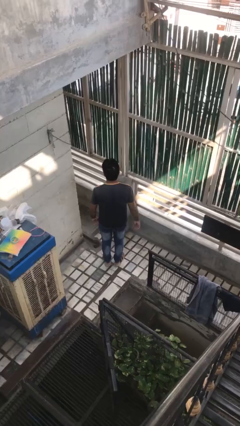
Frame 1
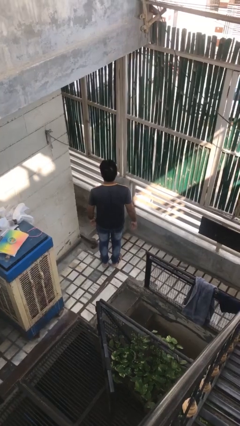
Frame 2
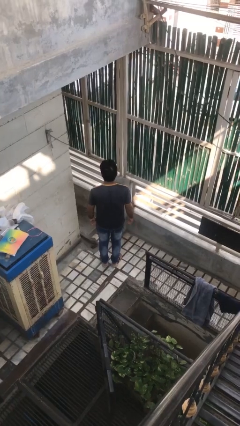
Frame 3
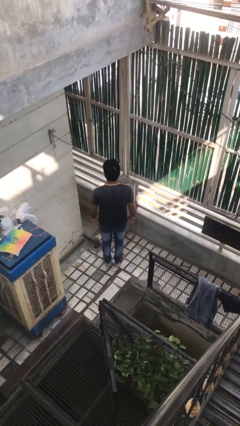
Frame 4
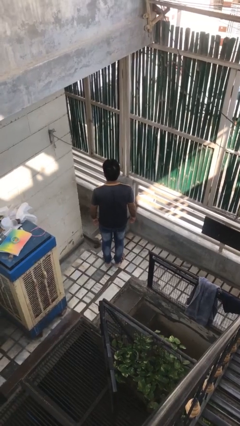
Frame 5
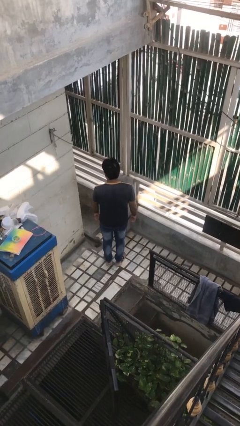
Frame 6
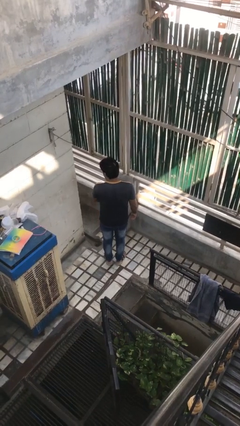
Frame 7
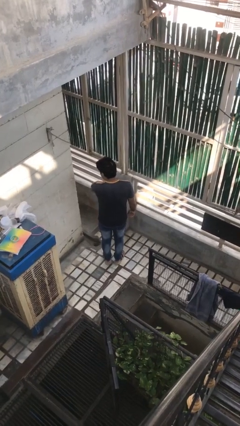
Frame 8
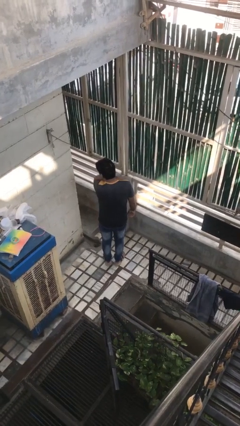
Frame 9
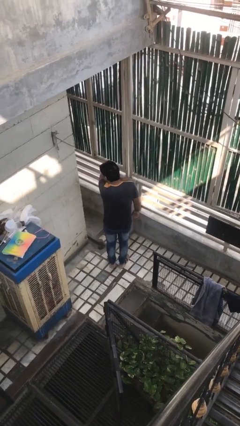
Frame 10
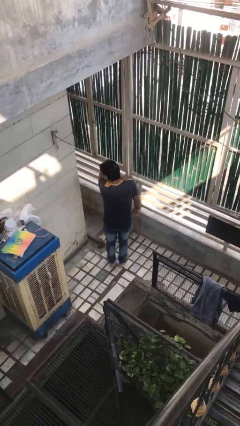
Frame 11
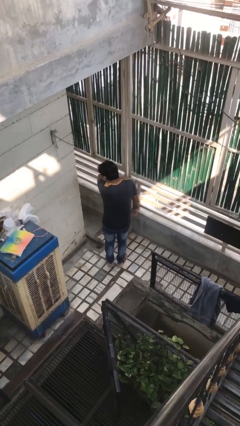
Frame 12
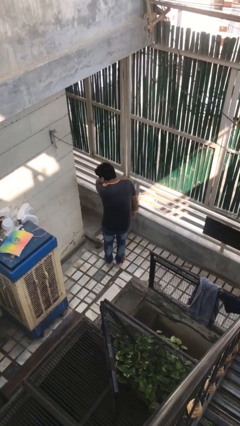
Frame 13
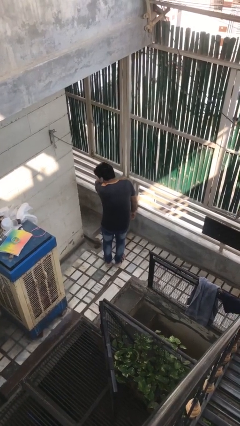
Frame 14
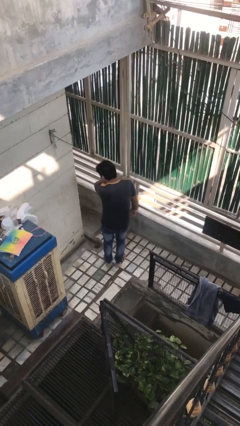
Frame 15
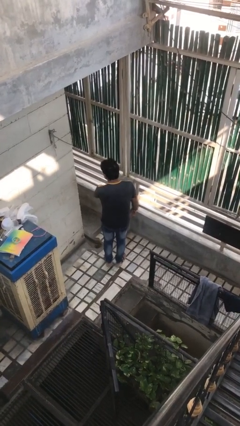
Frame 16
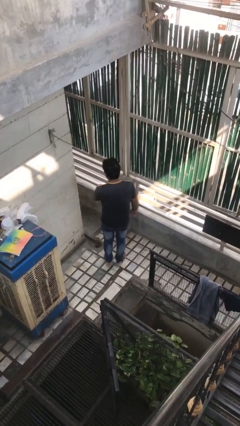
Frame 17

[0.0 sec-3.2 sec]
person sneezes into arm

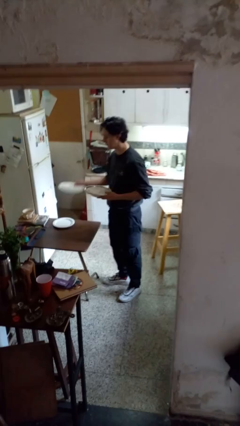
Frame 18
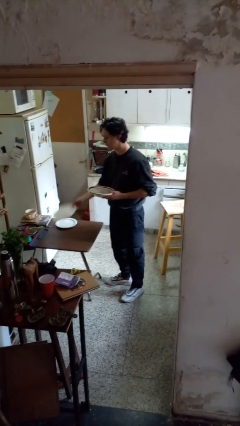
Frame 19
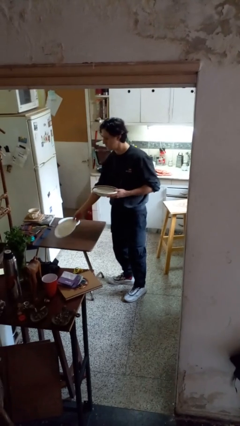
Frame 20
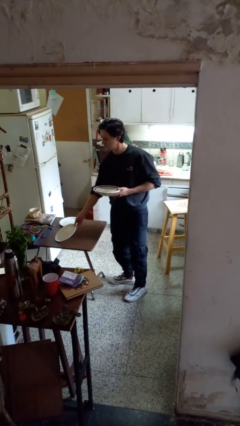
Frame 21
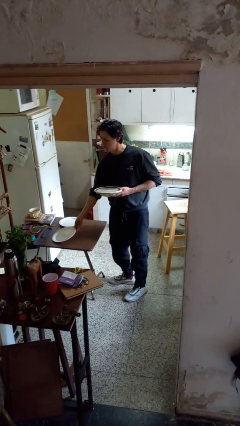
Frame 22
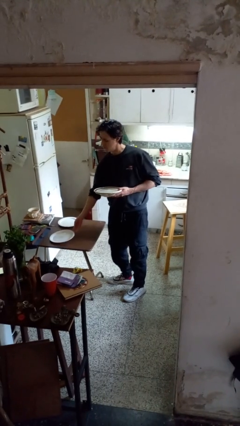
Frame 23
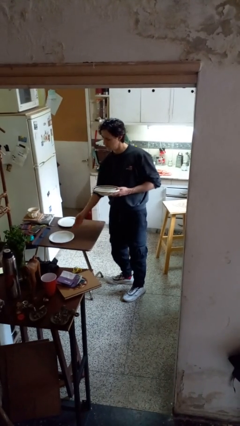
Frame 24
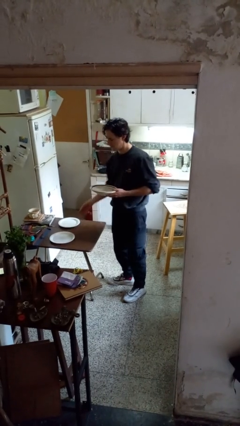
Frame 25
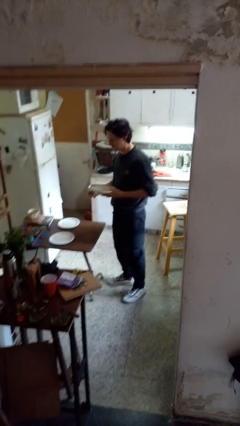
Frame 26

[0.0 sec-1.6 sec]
person sets table

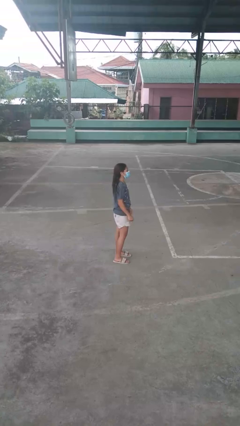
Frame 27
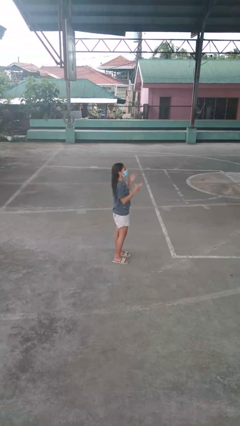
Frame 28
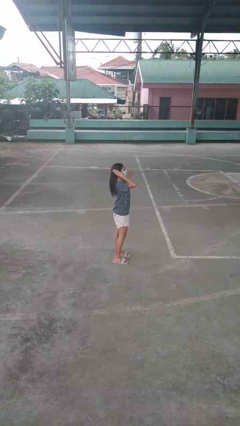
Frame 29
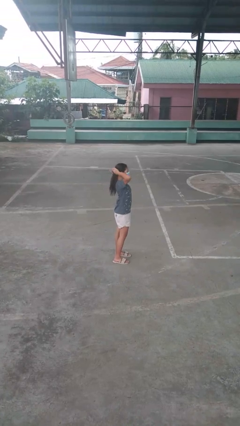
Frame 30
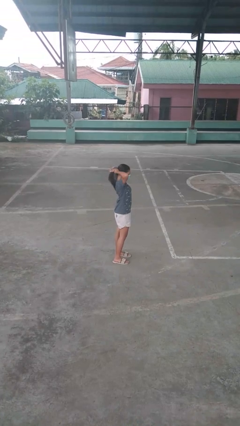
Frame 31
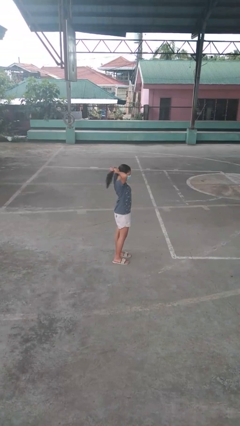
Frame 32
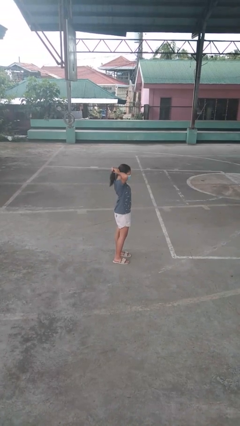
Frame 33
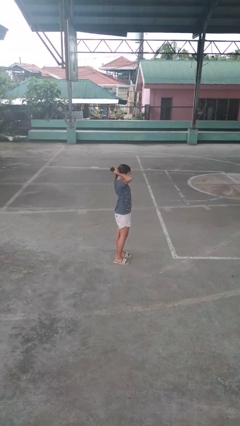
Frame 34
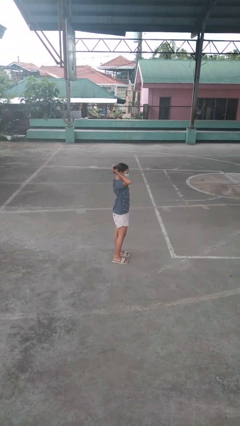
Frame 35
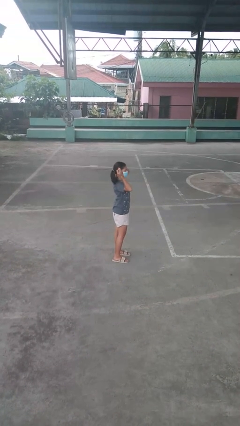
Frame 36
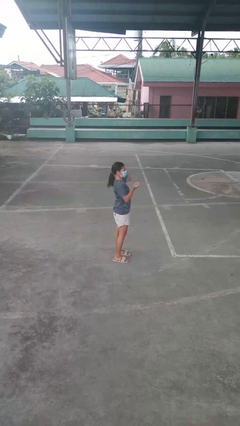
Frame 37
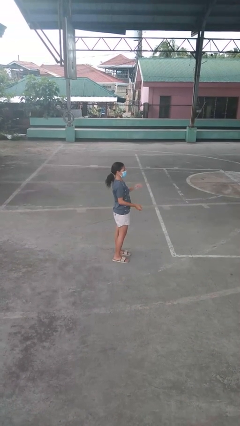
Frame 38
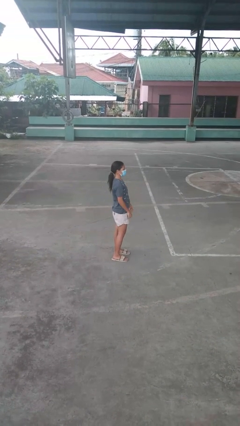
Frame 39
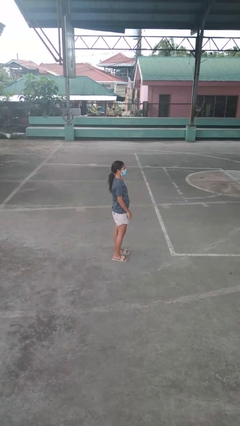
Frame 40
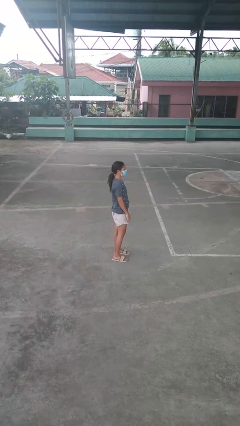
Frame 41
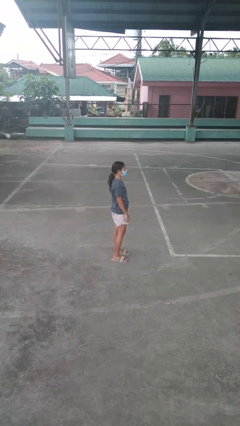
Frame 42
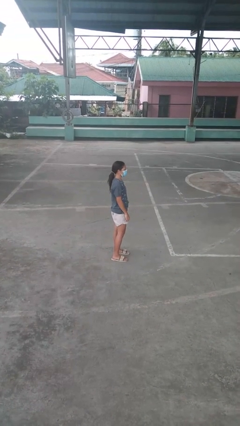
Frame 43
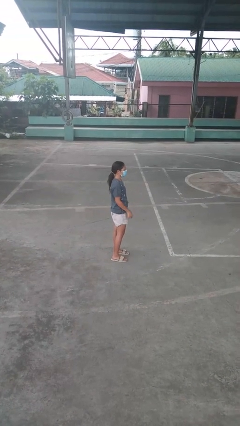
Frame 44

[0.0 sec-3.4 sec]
person puts hair in ponytail

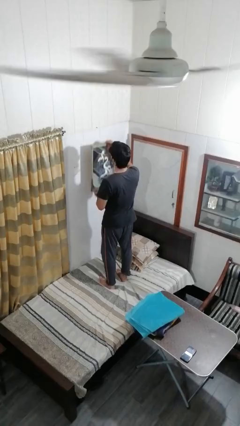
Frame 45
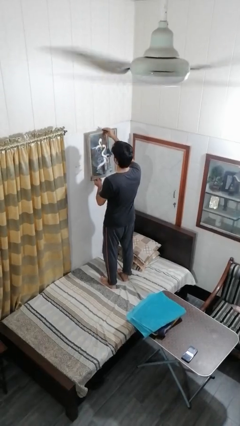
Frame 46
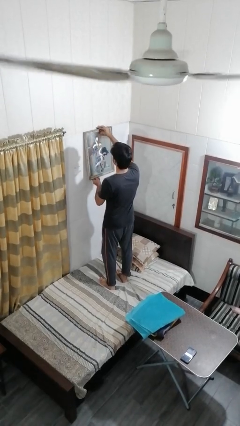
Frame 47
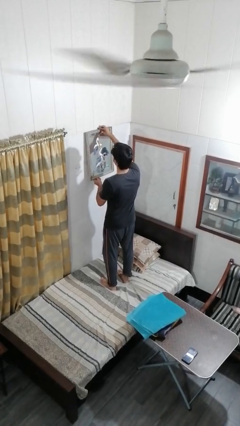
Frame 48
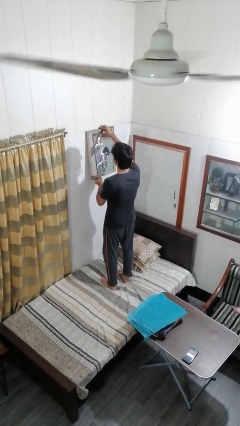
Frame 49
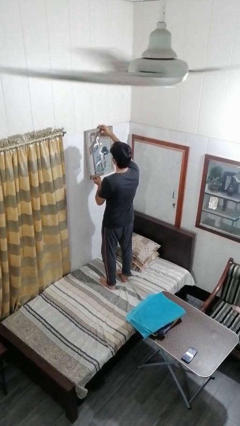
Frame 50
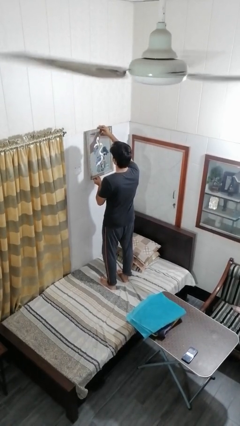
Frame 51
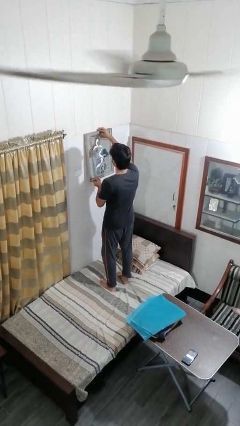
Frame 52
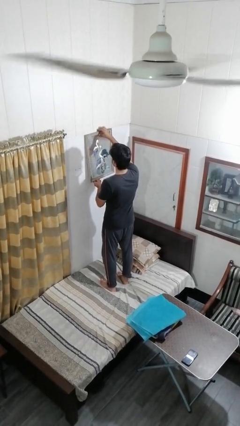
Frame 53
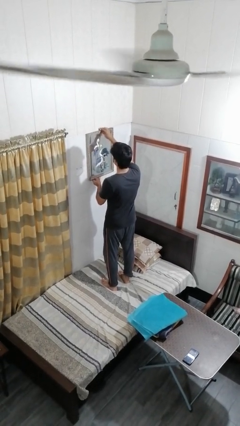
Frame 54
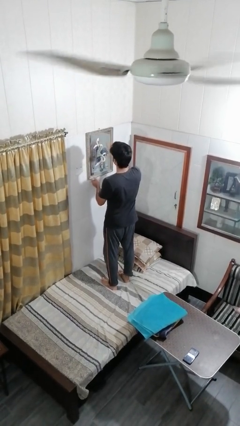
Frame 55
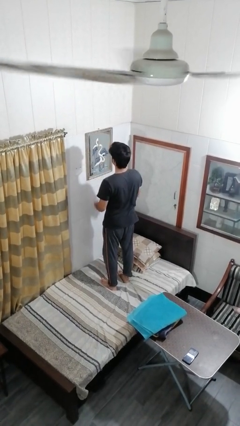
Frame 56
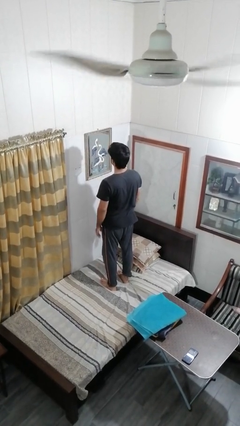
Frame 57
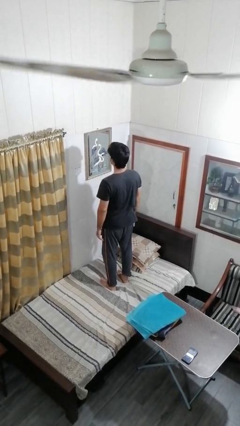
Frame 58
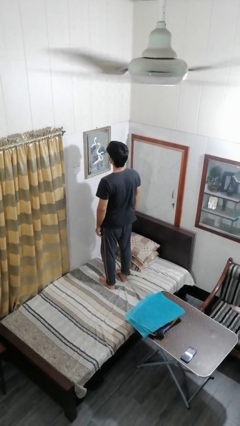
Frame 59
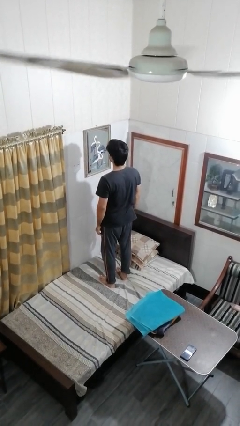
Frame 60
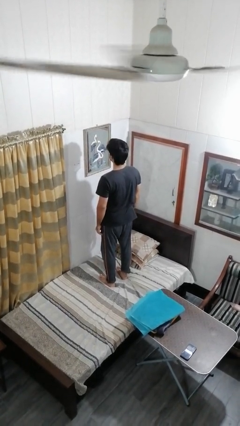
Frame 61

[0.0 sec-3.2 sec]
person puts up picture frame

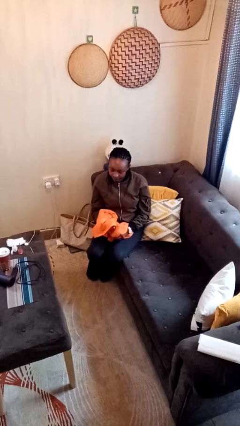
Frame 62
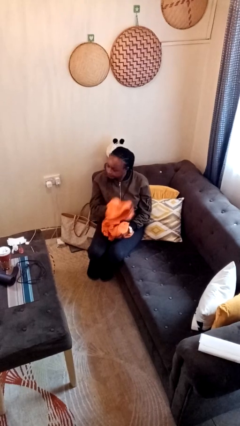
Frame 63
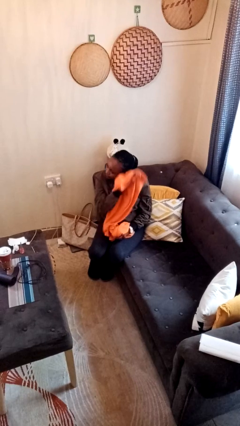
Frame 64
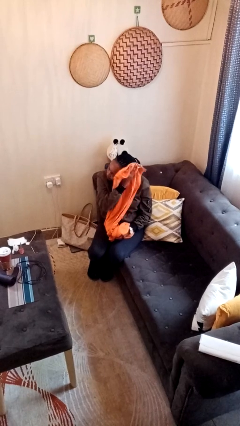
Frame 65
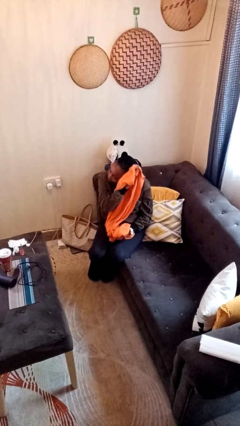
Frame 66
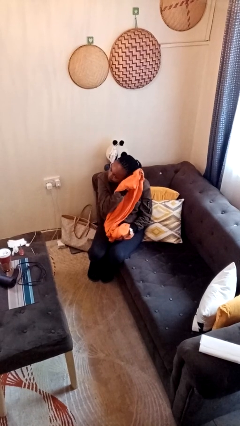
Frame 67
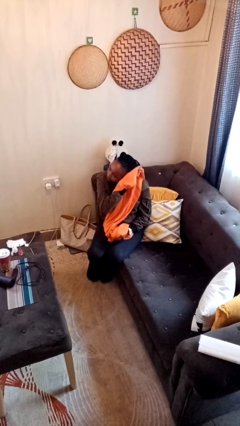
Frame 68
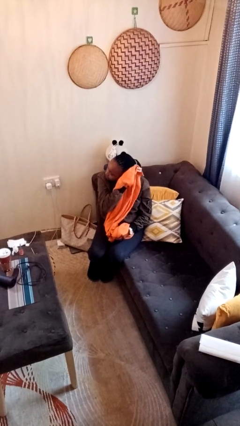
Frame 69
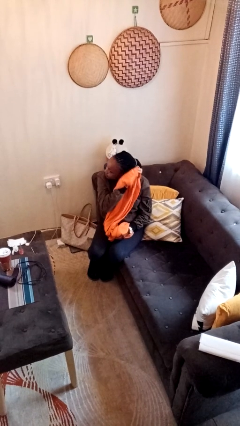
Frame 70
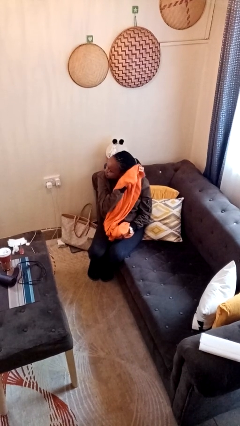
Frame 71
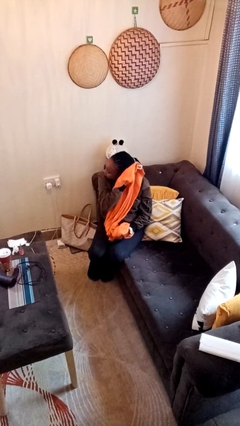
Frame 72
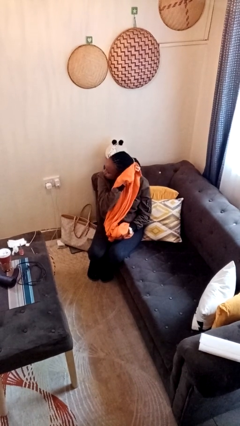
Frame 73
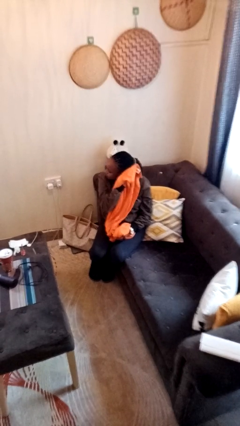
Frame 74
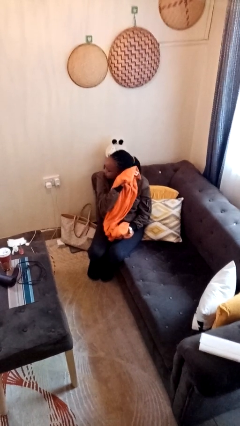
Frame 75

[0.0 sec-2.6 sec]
person dries hair with towel

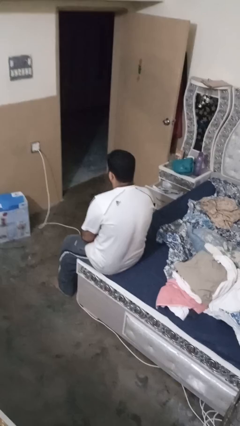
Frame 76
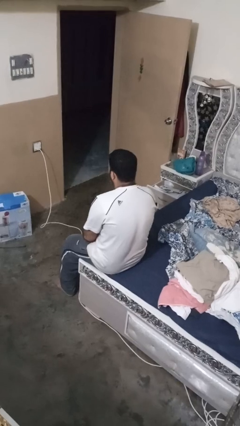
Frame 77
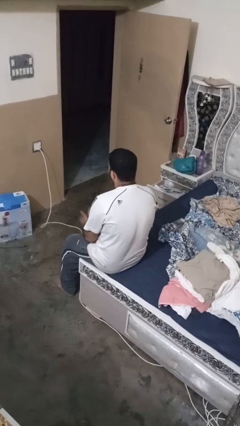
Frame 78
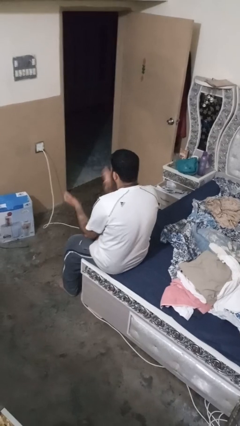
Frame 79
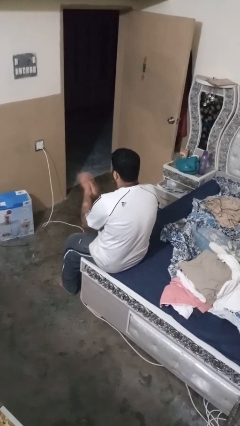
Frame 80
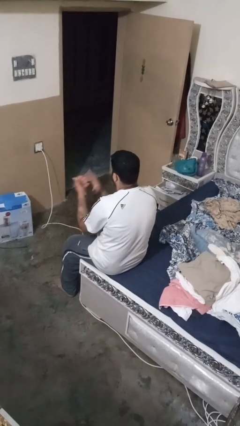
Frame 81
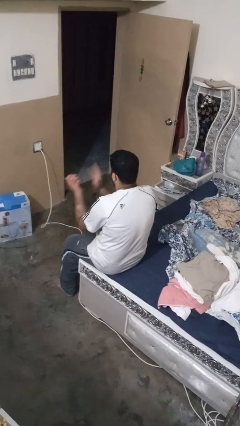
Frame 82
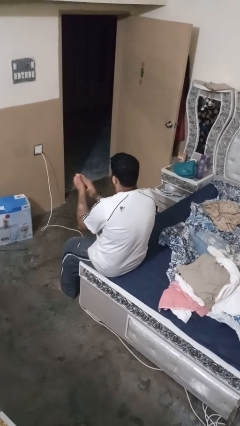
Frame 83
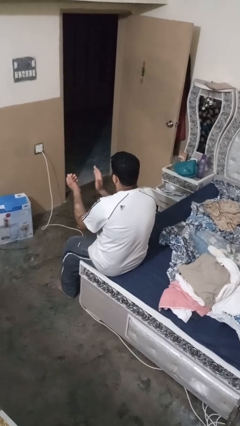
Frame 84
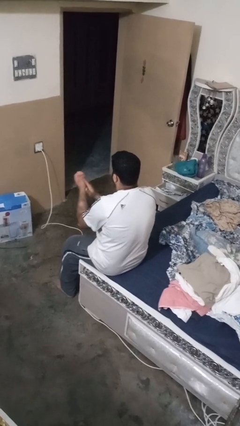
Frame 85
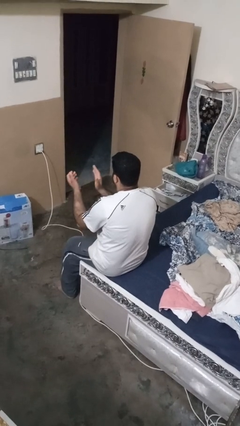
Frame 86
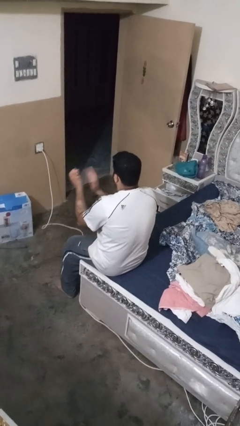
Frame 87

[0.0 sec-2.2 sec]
person claps hands

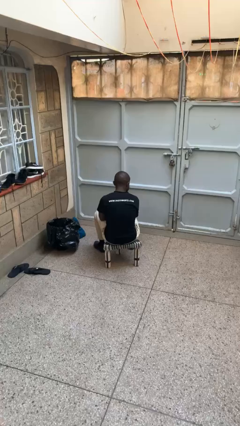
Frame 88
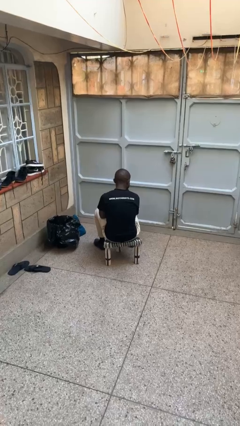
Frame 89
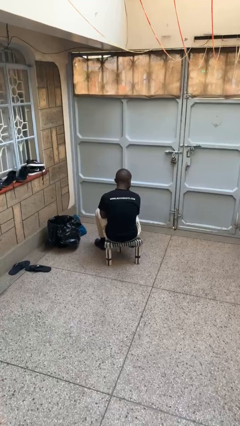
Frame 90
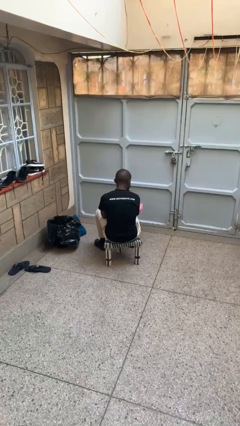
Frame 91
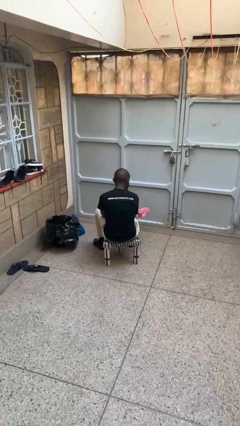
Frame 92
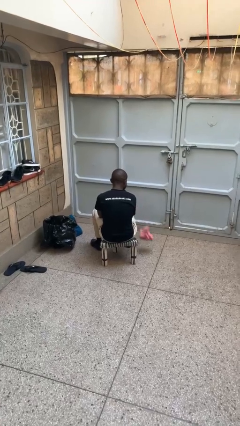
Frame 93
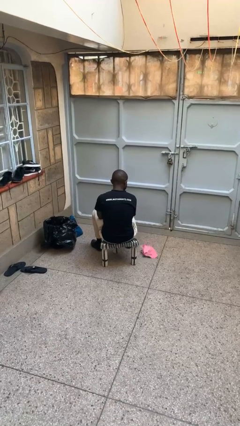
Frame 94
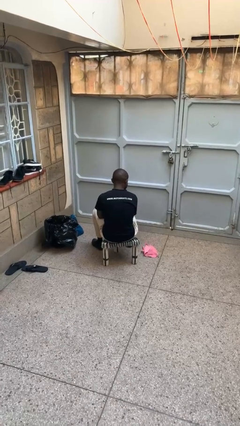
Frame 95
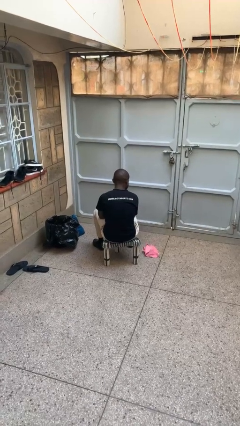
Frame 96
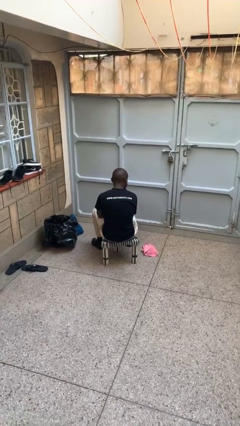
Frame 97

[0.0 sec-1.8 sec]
person throws object on table
